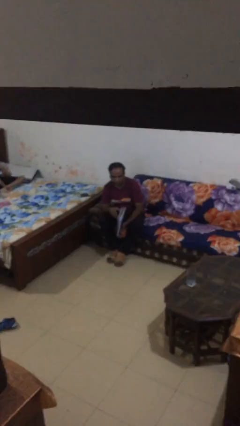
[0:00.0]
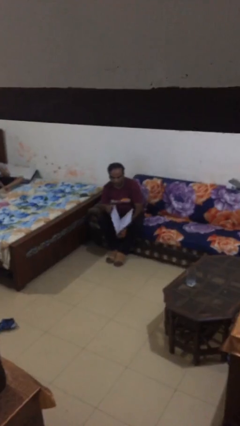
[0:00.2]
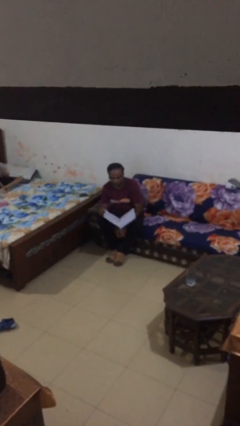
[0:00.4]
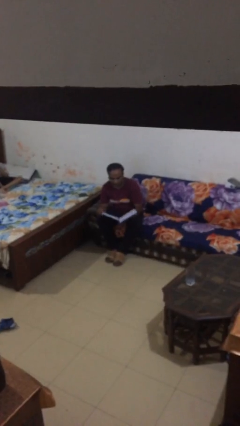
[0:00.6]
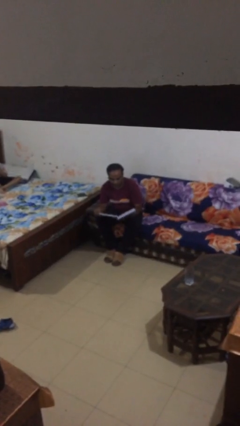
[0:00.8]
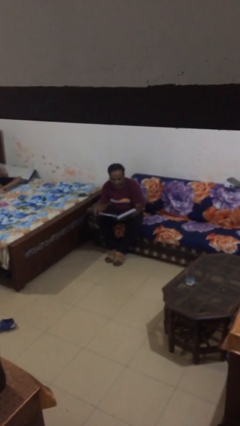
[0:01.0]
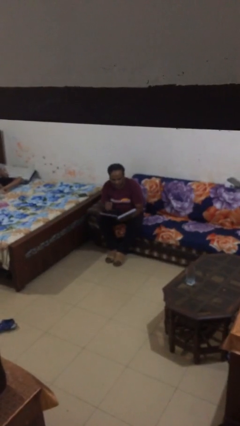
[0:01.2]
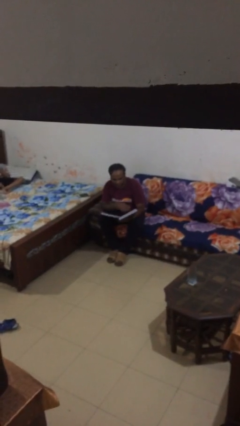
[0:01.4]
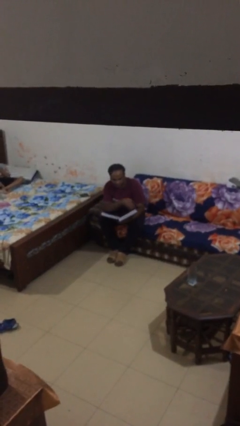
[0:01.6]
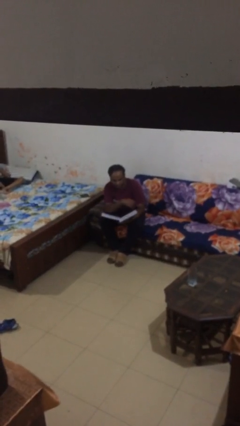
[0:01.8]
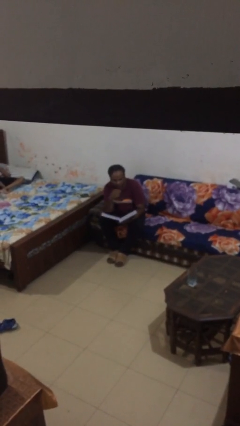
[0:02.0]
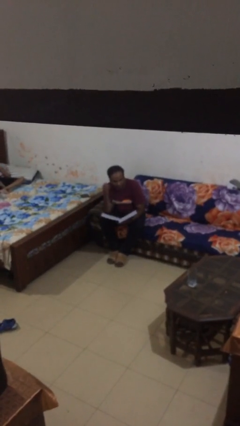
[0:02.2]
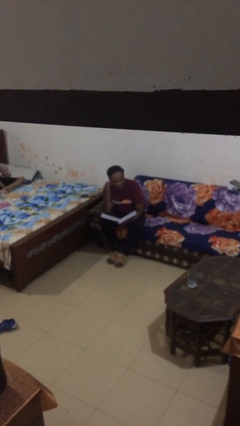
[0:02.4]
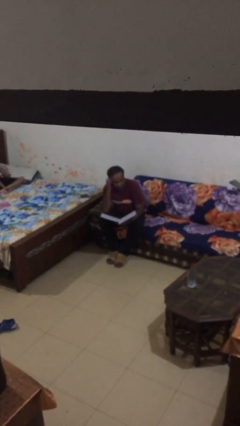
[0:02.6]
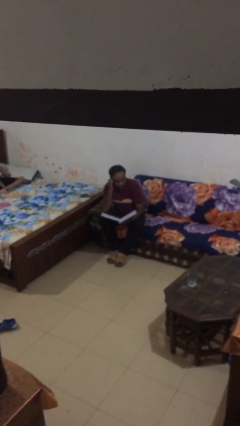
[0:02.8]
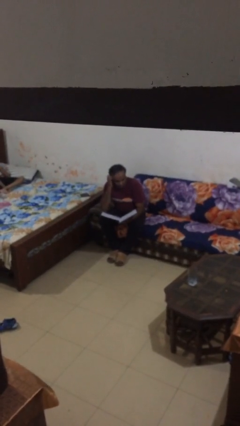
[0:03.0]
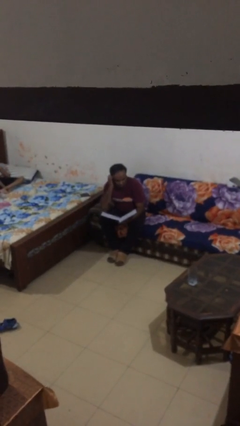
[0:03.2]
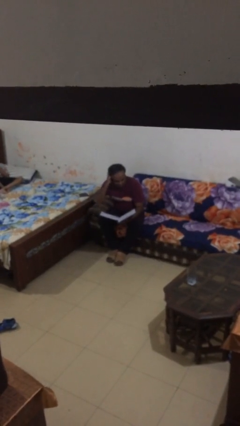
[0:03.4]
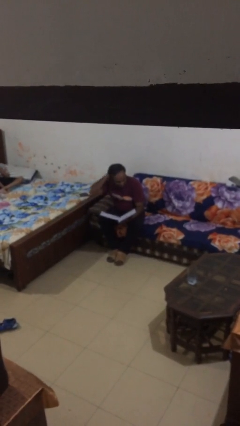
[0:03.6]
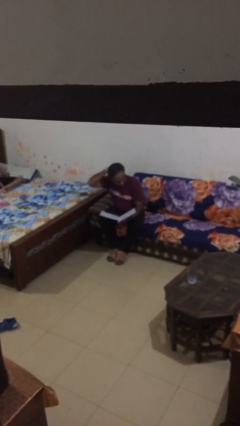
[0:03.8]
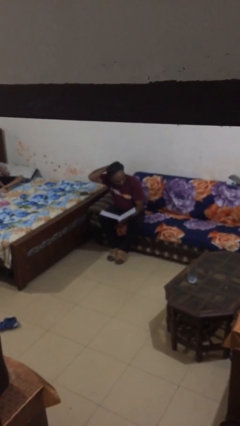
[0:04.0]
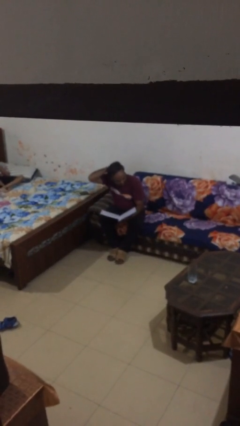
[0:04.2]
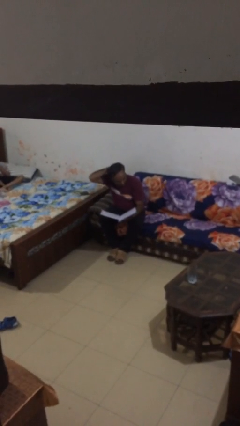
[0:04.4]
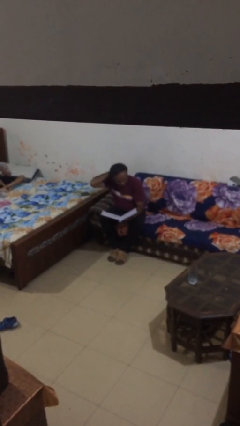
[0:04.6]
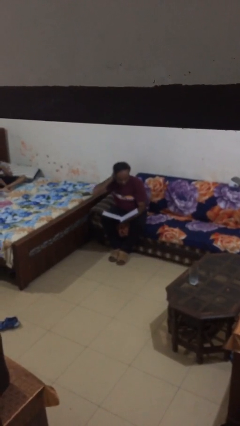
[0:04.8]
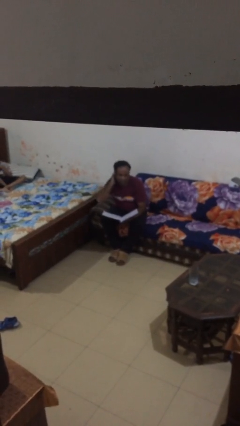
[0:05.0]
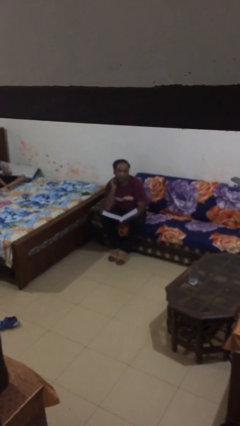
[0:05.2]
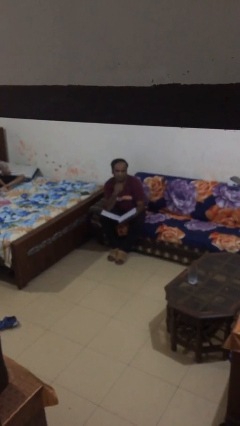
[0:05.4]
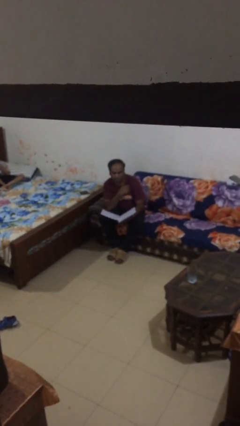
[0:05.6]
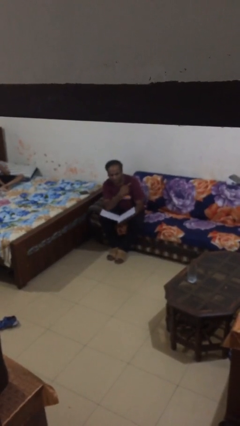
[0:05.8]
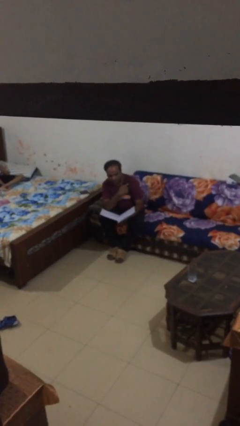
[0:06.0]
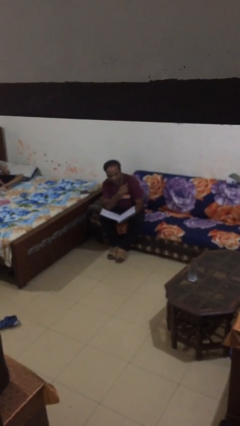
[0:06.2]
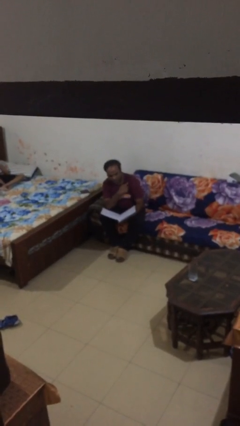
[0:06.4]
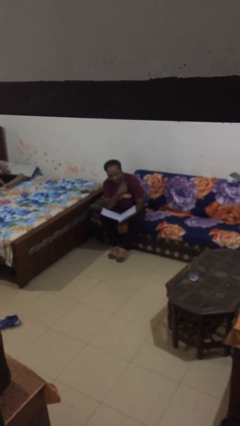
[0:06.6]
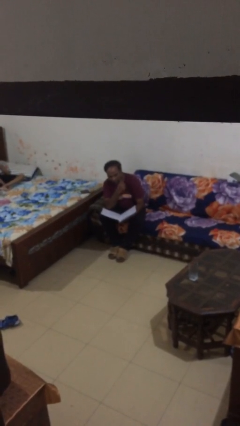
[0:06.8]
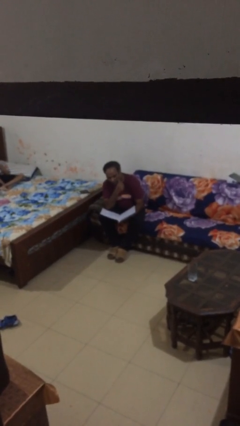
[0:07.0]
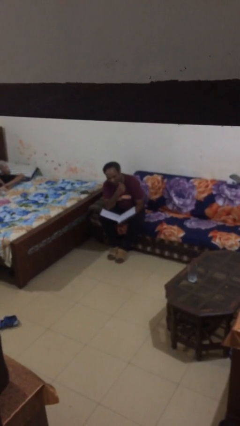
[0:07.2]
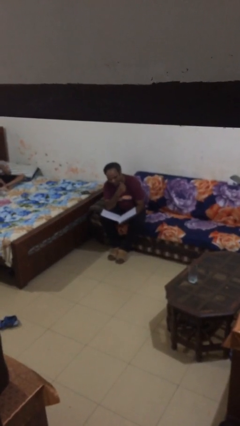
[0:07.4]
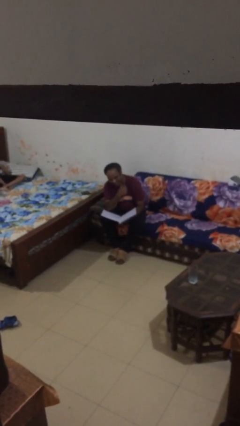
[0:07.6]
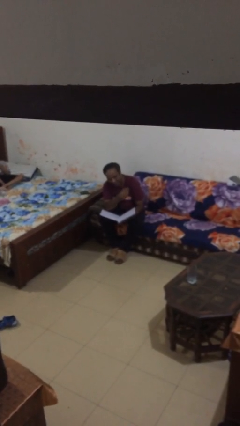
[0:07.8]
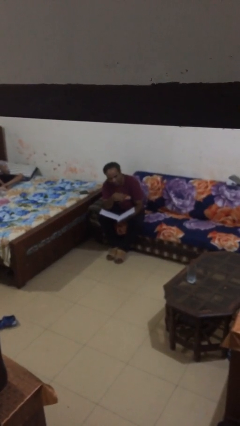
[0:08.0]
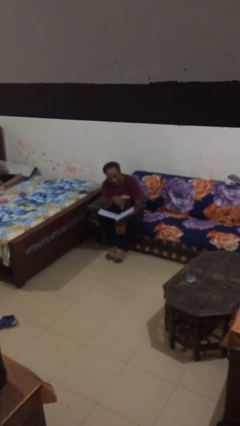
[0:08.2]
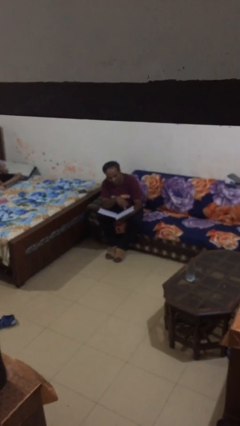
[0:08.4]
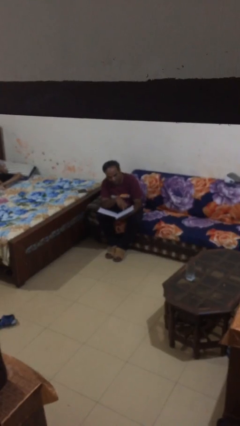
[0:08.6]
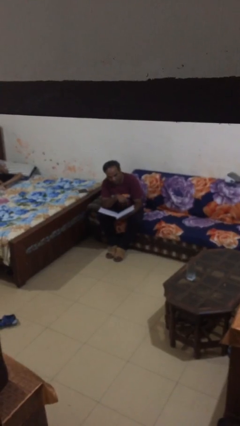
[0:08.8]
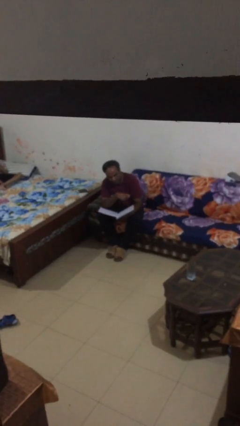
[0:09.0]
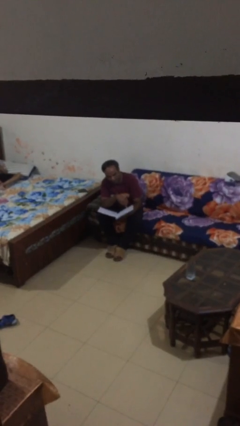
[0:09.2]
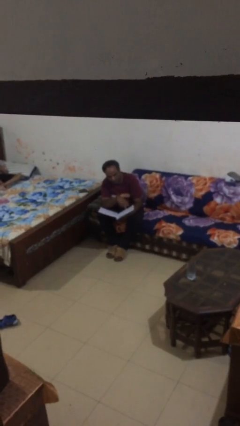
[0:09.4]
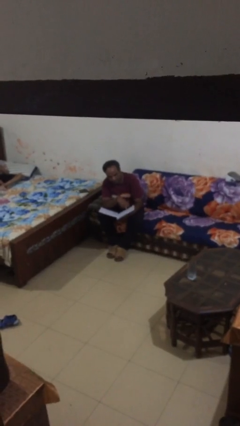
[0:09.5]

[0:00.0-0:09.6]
person reads document

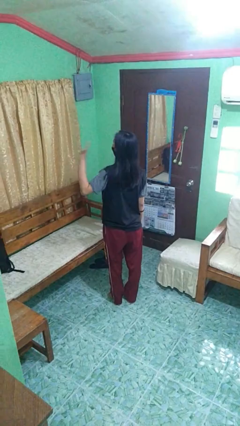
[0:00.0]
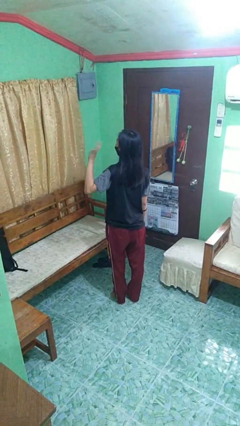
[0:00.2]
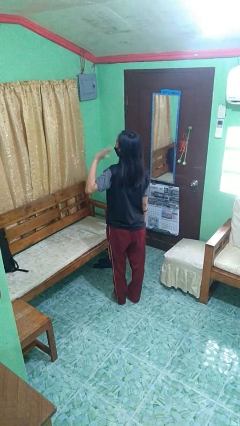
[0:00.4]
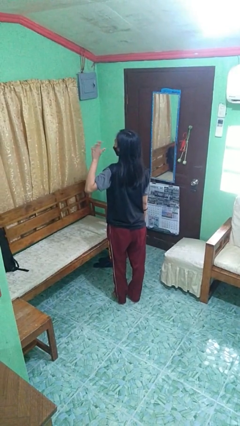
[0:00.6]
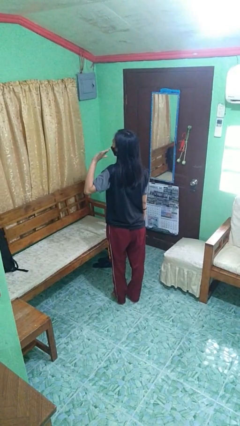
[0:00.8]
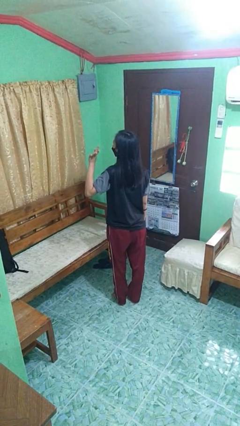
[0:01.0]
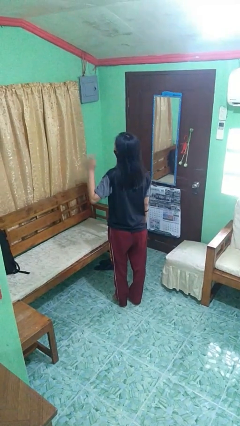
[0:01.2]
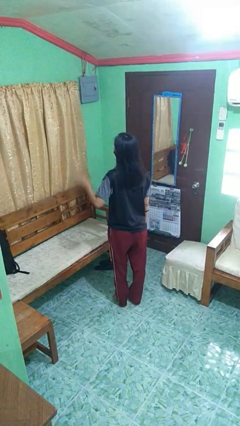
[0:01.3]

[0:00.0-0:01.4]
person waves at person

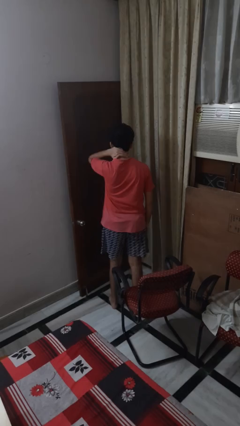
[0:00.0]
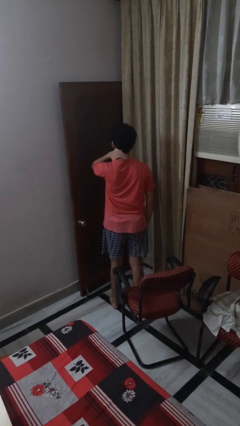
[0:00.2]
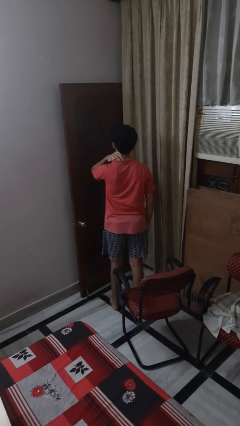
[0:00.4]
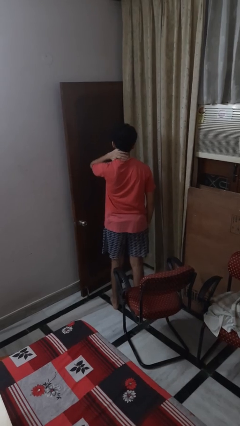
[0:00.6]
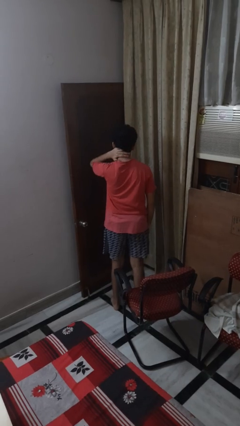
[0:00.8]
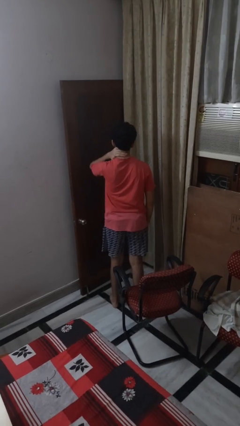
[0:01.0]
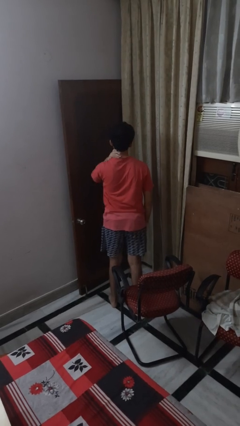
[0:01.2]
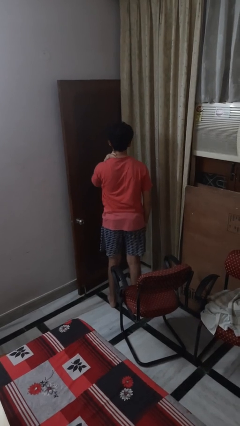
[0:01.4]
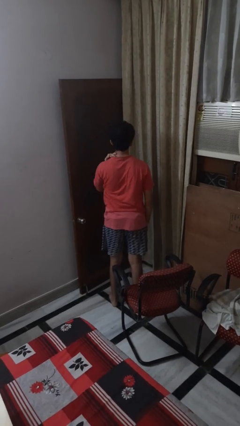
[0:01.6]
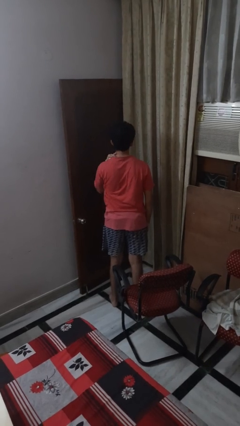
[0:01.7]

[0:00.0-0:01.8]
person rubs neck
